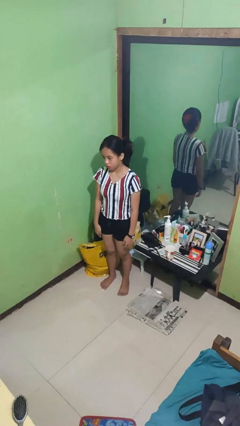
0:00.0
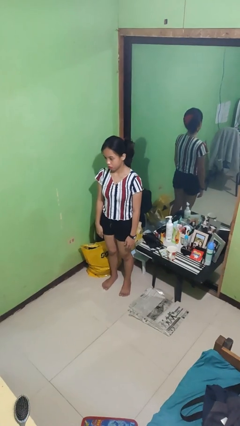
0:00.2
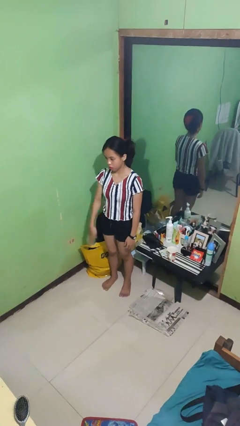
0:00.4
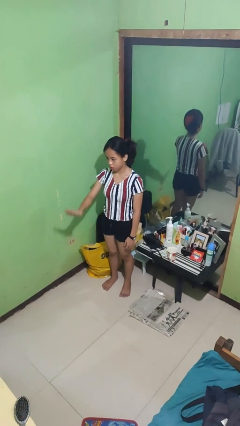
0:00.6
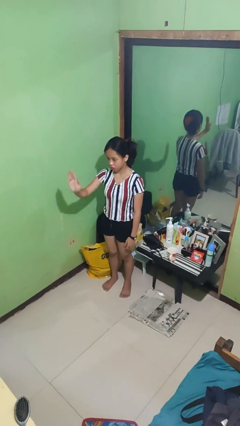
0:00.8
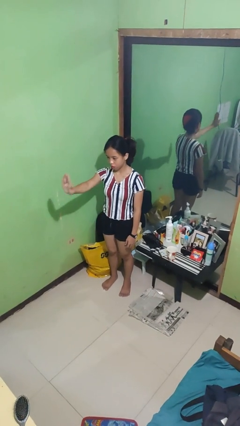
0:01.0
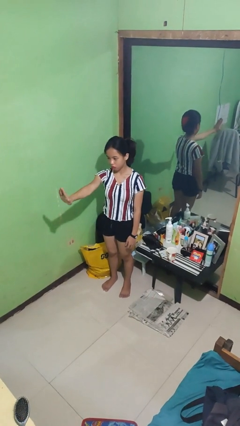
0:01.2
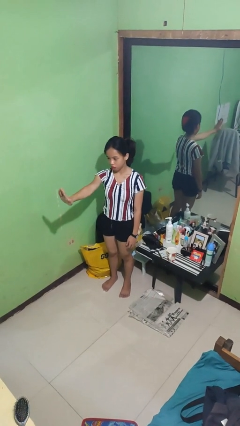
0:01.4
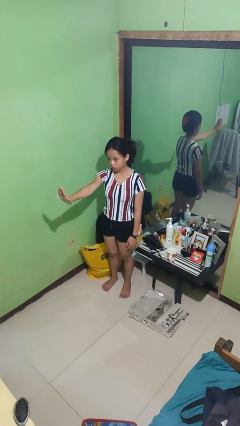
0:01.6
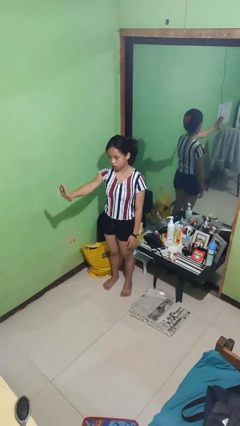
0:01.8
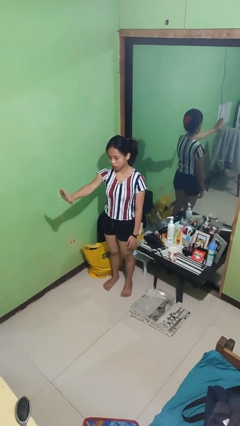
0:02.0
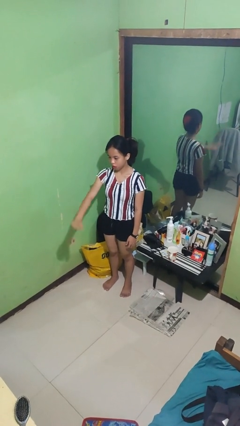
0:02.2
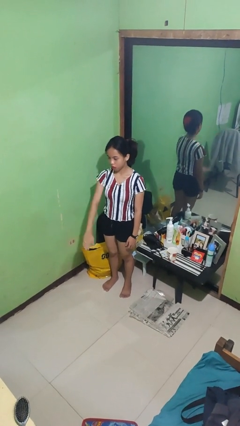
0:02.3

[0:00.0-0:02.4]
person gestures stop

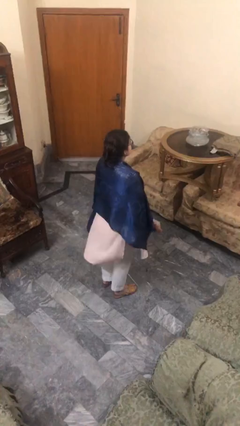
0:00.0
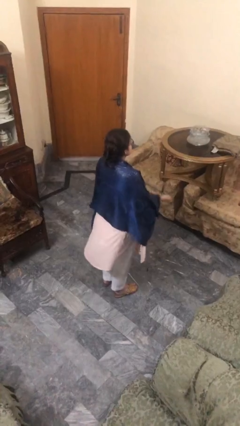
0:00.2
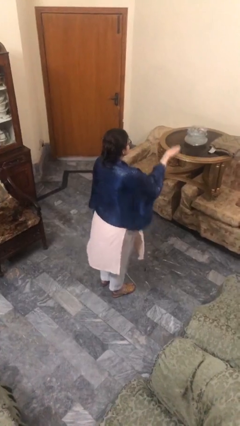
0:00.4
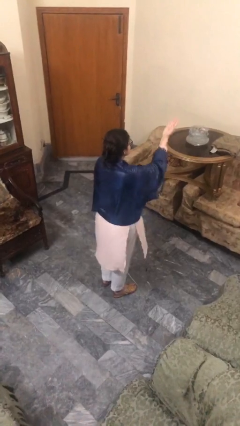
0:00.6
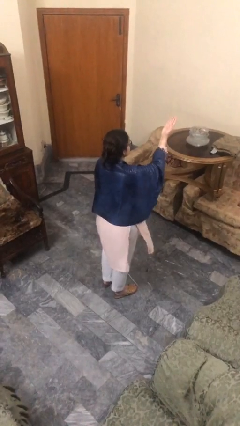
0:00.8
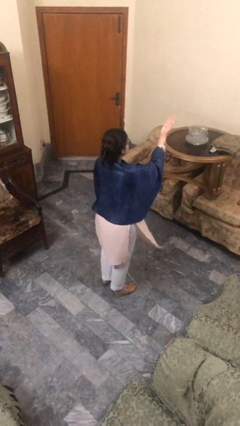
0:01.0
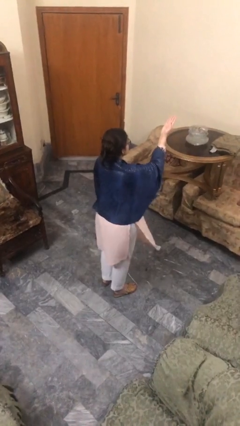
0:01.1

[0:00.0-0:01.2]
person gestures swipe up

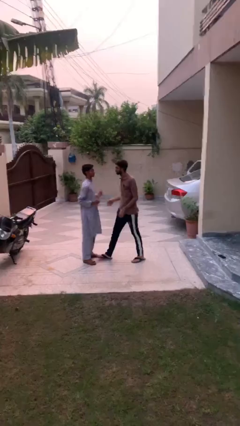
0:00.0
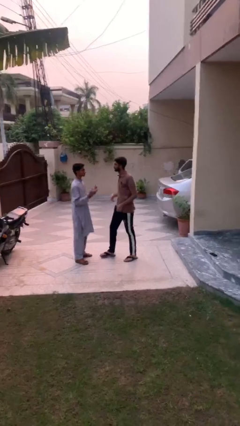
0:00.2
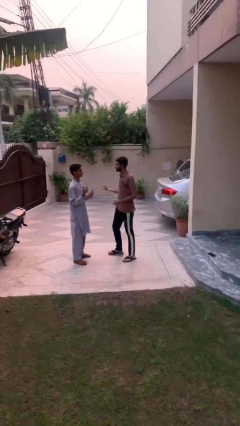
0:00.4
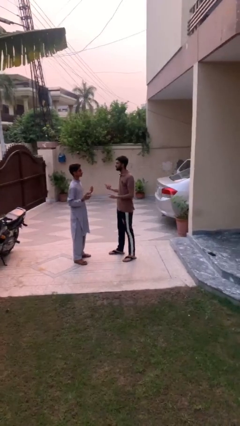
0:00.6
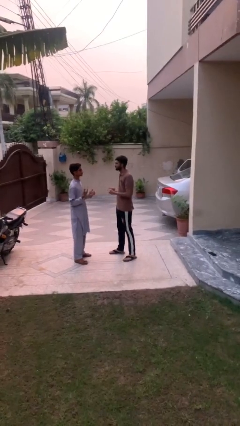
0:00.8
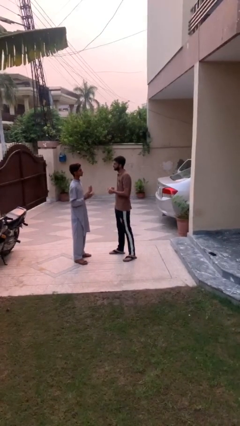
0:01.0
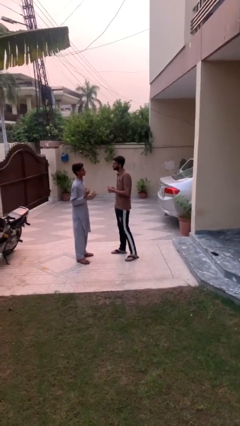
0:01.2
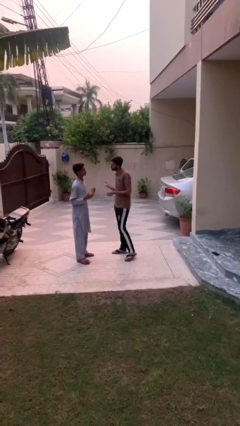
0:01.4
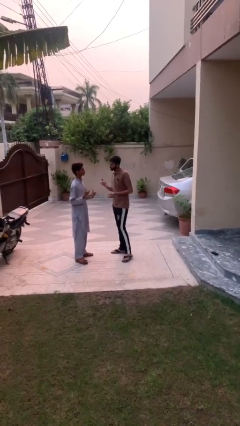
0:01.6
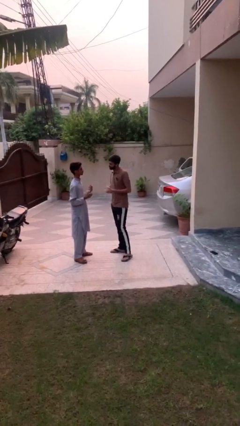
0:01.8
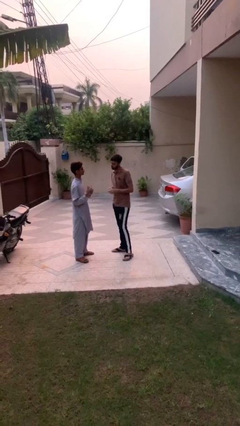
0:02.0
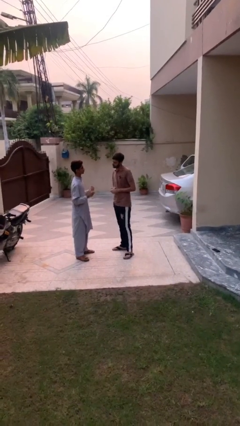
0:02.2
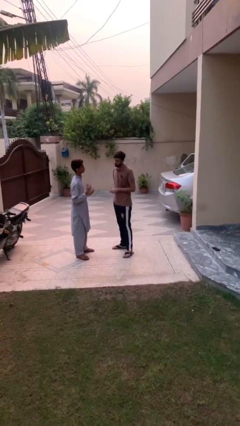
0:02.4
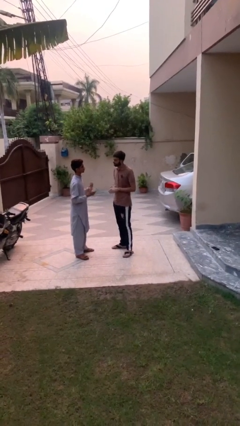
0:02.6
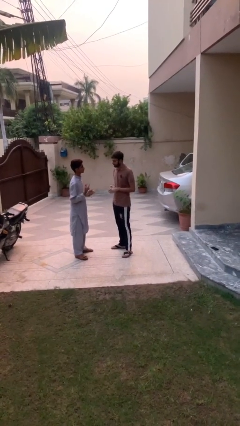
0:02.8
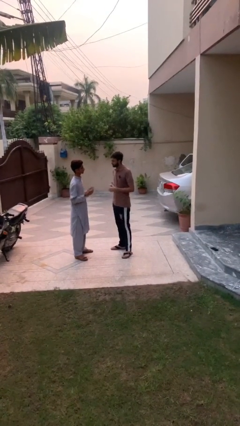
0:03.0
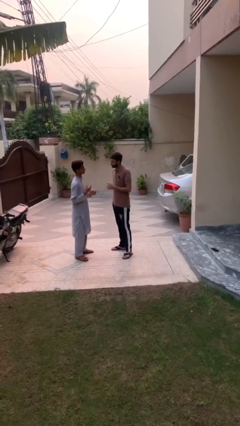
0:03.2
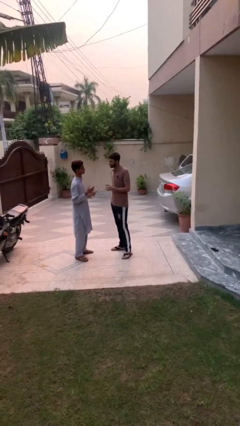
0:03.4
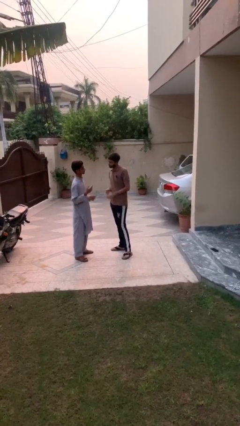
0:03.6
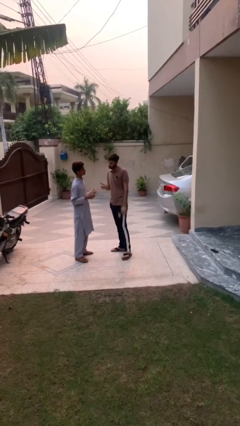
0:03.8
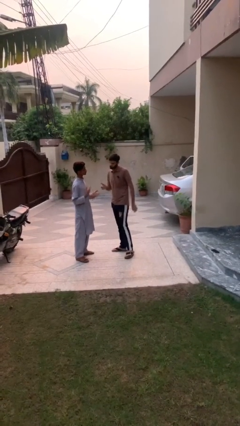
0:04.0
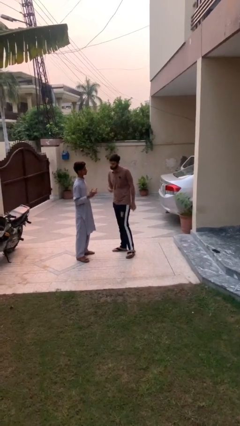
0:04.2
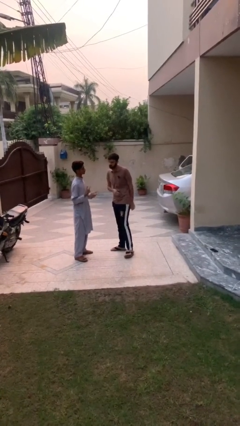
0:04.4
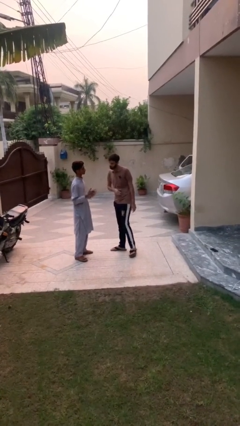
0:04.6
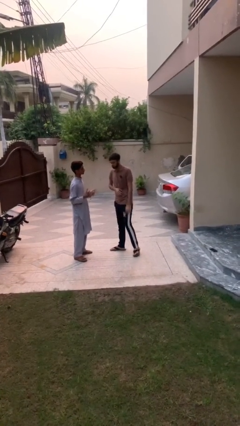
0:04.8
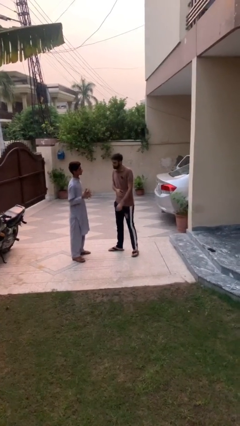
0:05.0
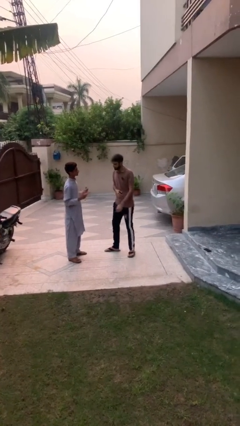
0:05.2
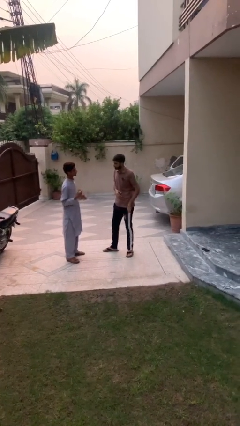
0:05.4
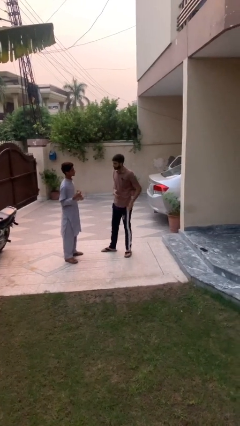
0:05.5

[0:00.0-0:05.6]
person talks to person

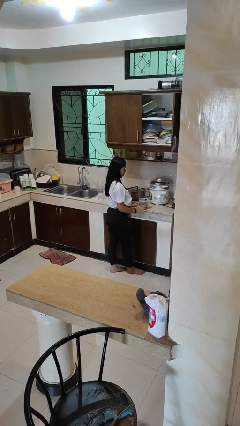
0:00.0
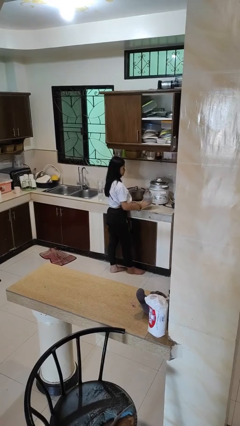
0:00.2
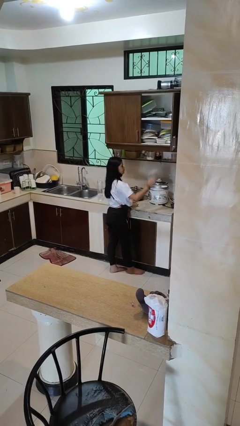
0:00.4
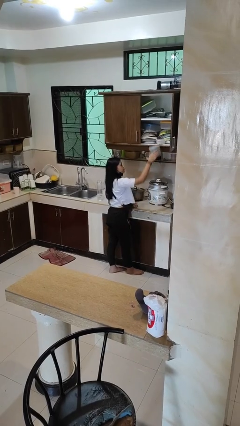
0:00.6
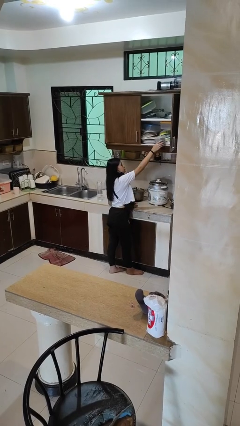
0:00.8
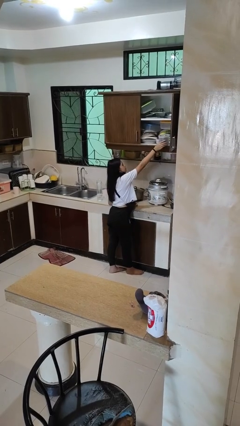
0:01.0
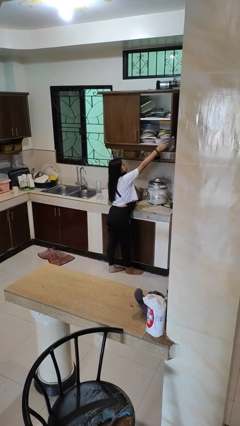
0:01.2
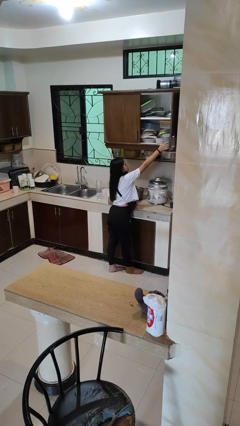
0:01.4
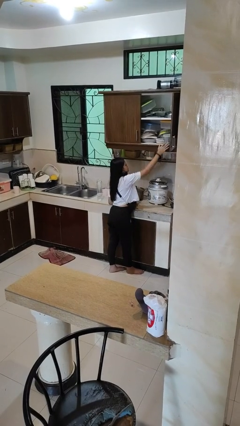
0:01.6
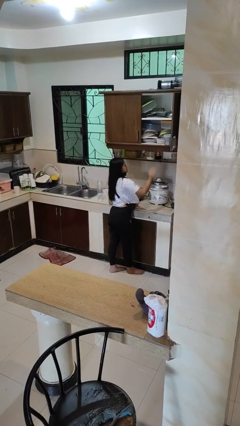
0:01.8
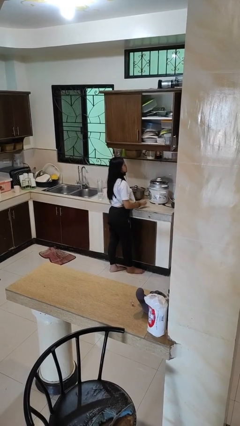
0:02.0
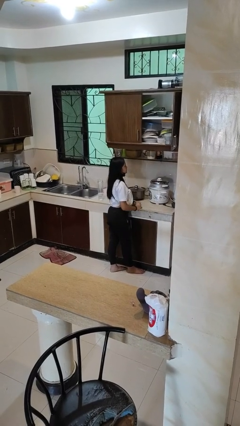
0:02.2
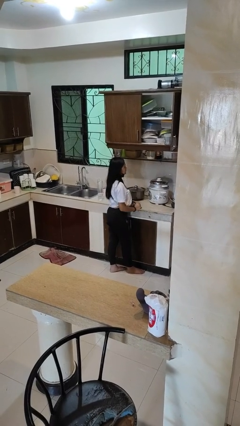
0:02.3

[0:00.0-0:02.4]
person puts down object on shelf

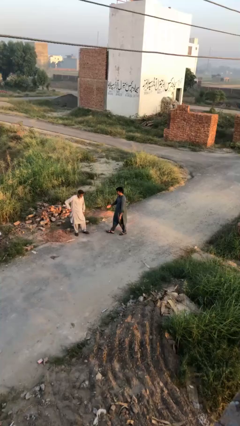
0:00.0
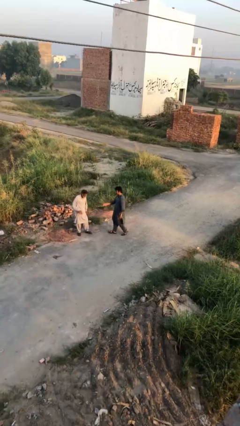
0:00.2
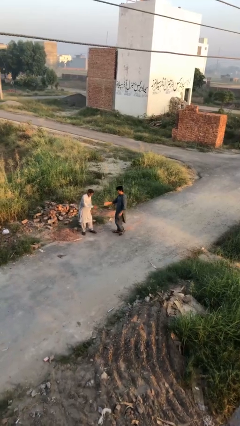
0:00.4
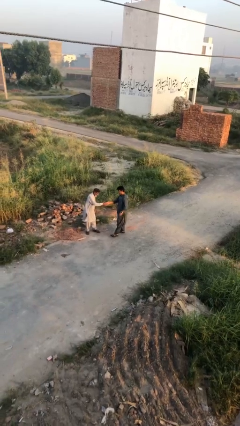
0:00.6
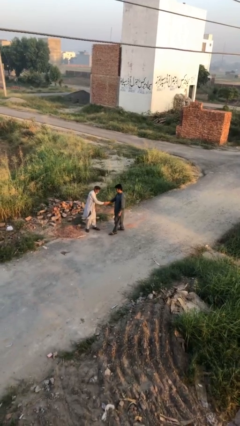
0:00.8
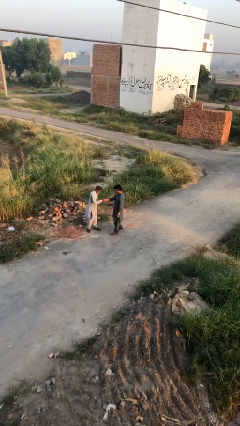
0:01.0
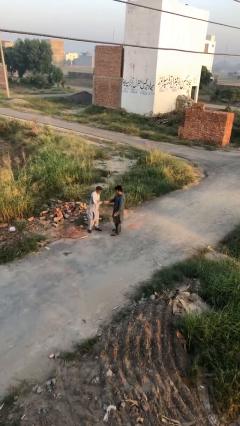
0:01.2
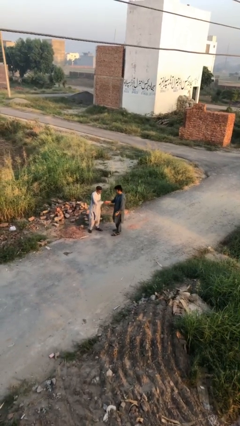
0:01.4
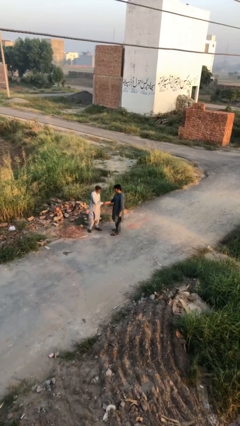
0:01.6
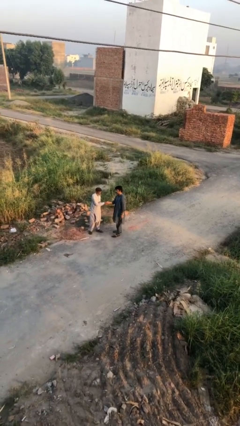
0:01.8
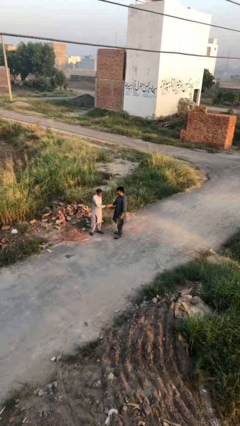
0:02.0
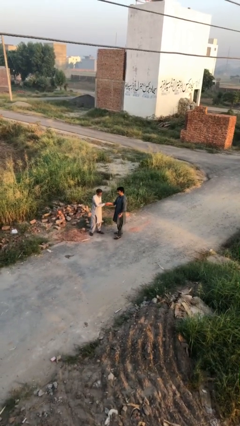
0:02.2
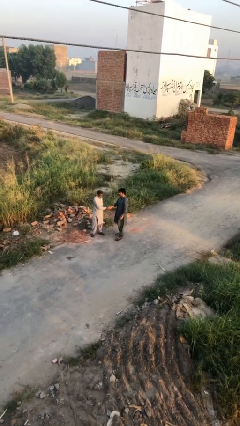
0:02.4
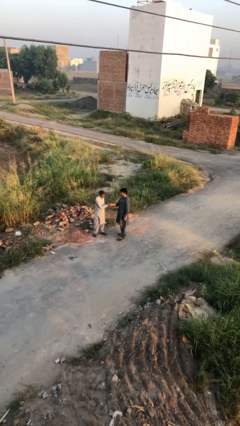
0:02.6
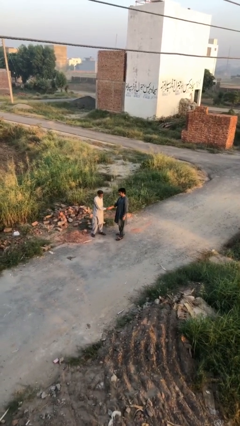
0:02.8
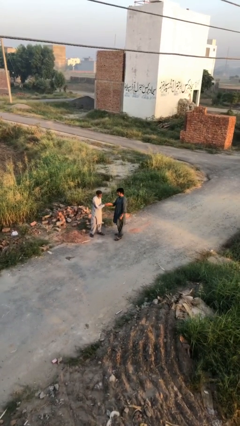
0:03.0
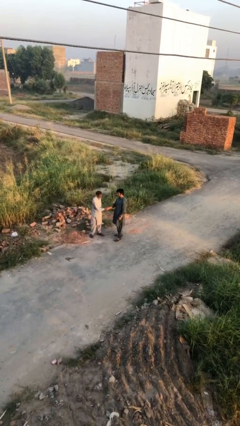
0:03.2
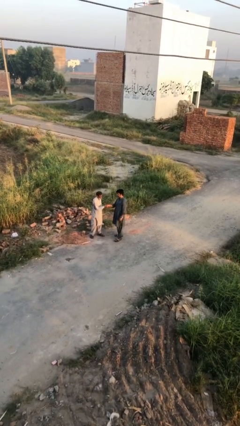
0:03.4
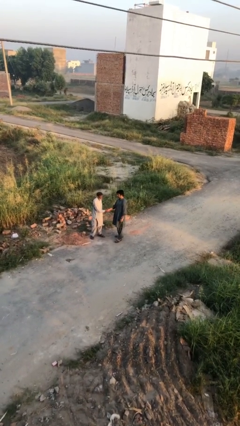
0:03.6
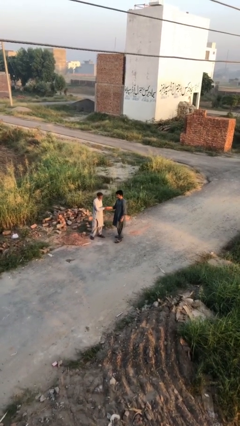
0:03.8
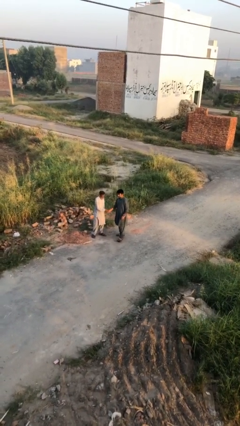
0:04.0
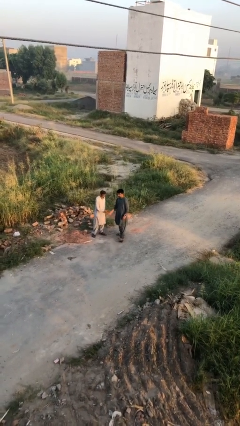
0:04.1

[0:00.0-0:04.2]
person shakes hand

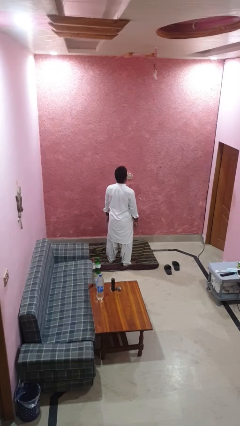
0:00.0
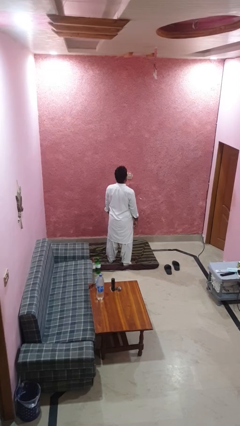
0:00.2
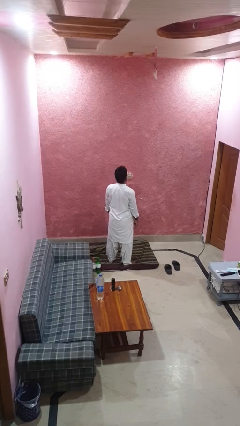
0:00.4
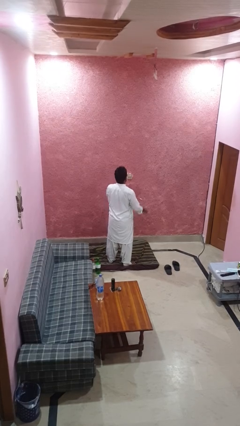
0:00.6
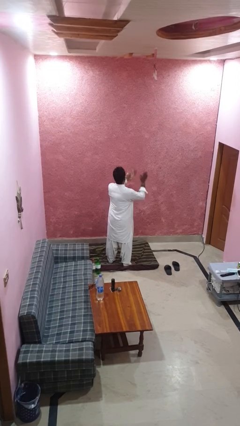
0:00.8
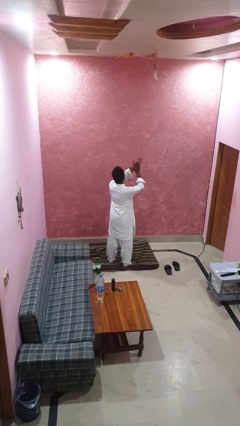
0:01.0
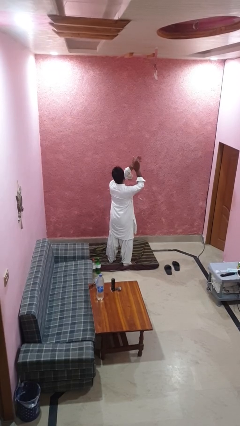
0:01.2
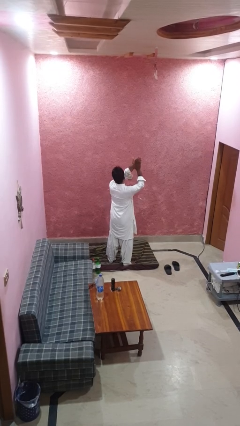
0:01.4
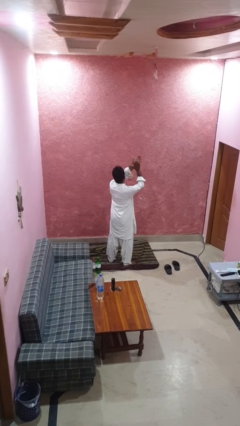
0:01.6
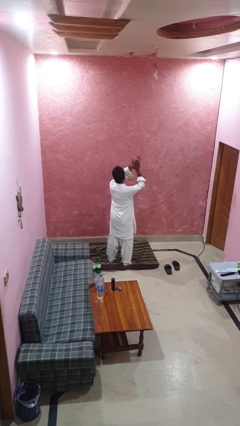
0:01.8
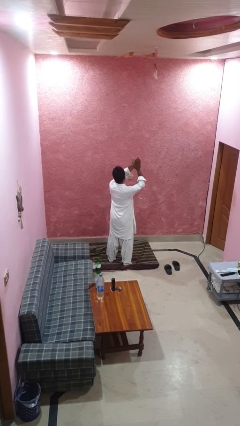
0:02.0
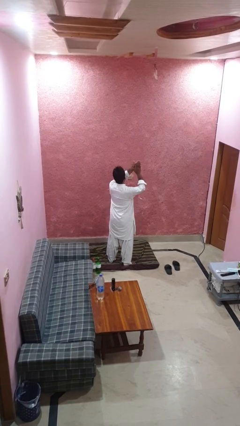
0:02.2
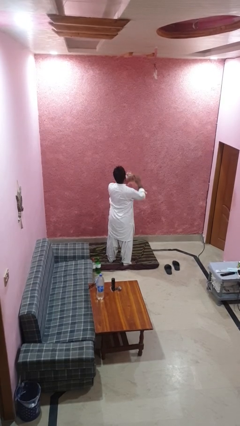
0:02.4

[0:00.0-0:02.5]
person claps hands
